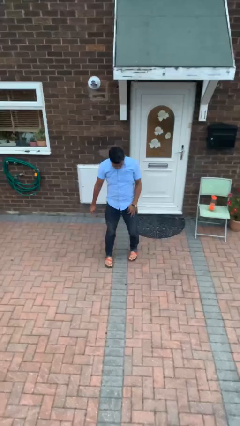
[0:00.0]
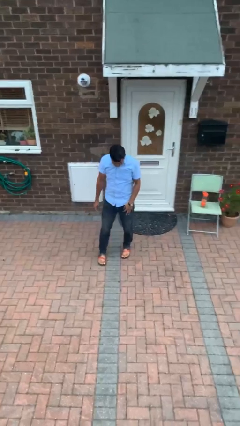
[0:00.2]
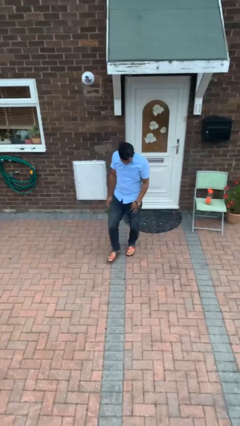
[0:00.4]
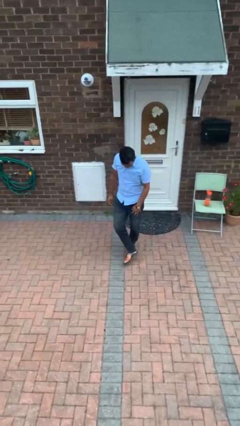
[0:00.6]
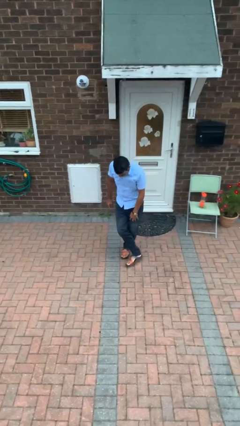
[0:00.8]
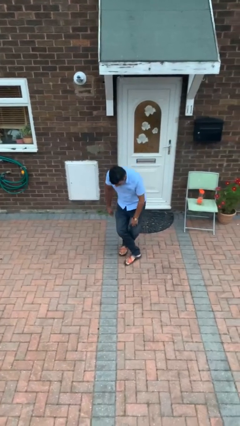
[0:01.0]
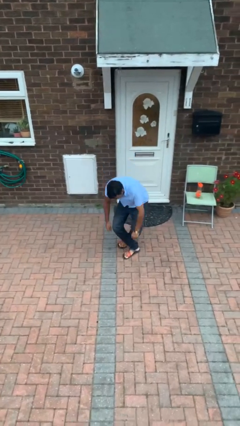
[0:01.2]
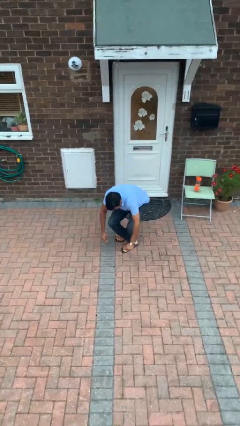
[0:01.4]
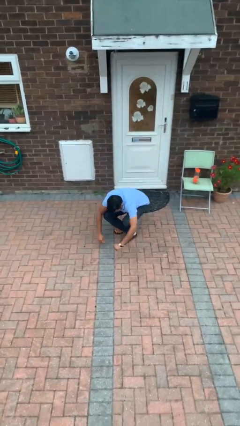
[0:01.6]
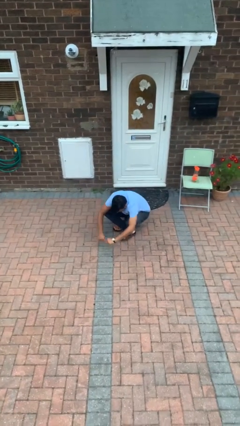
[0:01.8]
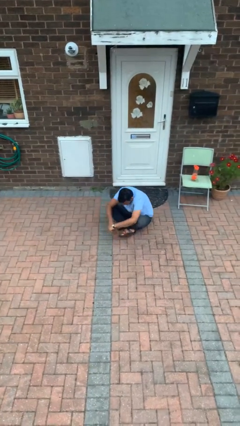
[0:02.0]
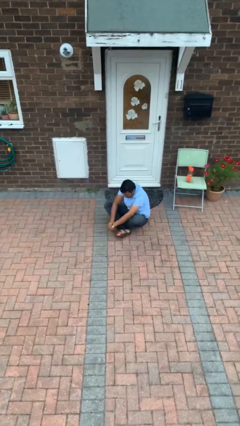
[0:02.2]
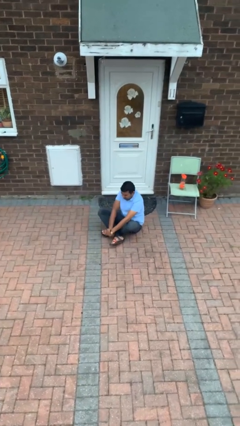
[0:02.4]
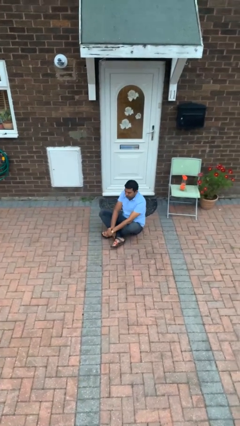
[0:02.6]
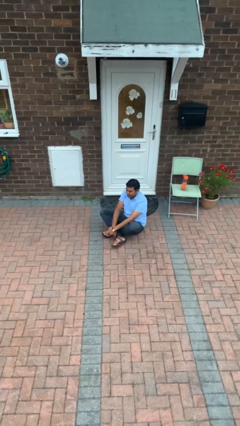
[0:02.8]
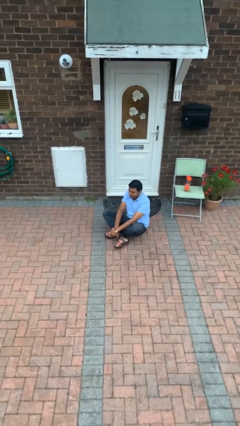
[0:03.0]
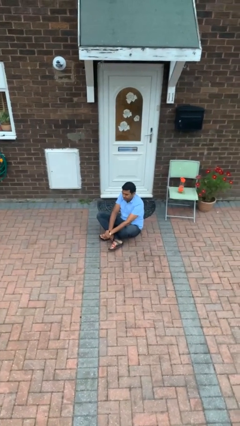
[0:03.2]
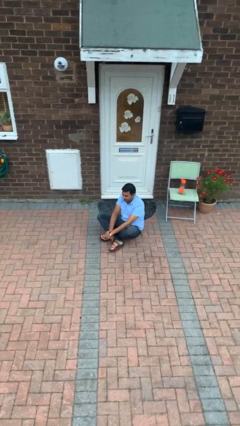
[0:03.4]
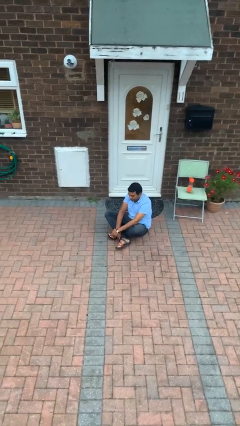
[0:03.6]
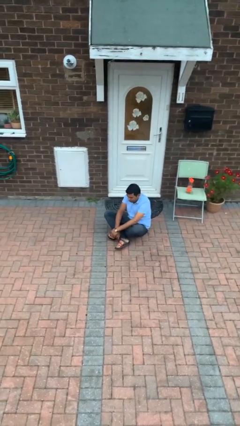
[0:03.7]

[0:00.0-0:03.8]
person sits crisscross

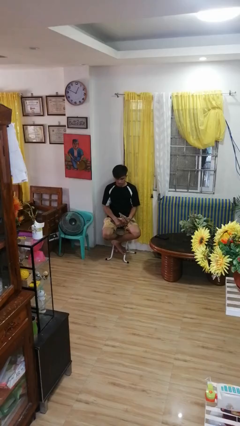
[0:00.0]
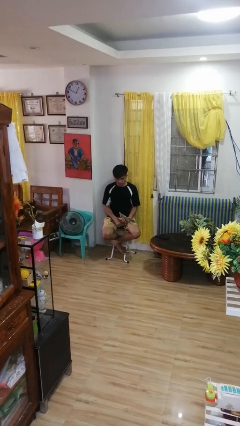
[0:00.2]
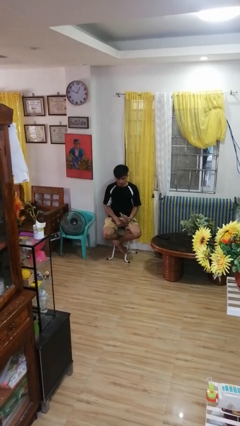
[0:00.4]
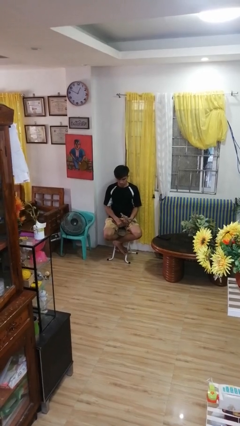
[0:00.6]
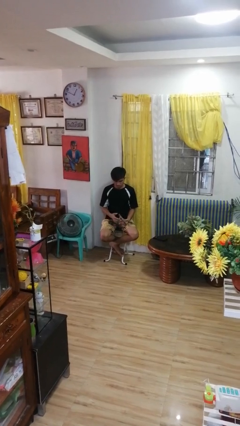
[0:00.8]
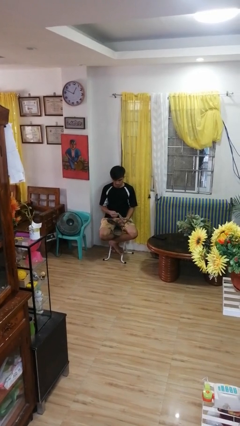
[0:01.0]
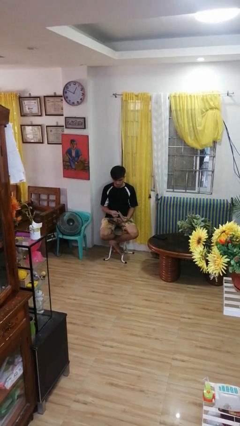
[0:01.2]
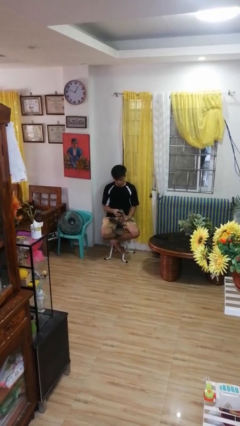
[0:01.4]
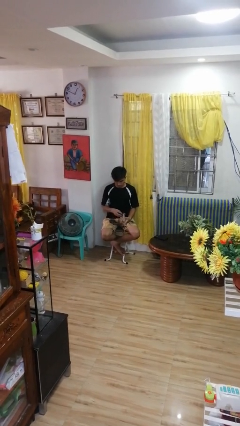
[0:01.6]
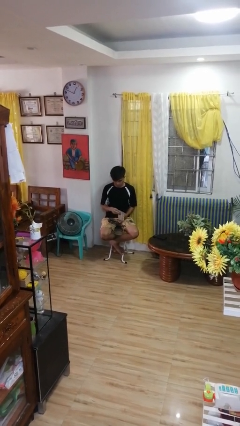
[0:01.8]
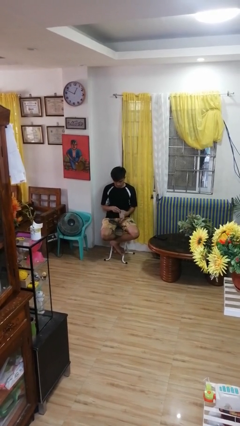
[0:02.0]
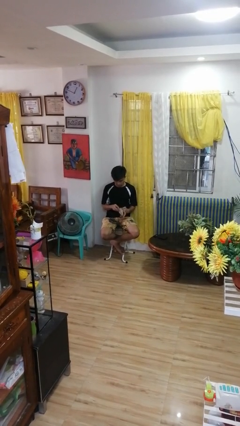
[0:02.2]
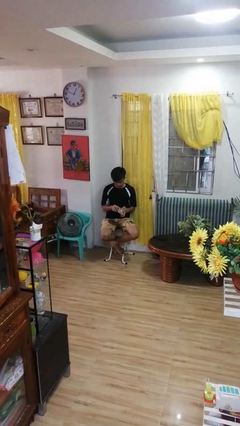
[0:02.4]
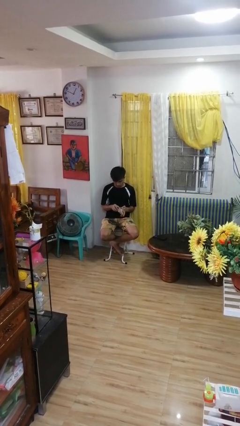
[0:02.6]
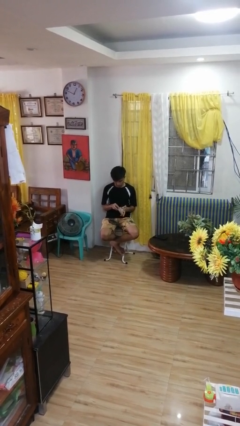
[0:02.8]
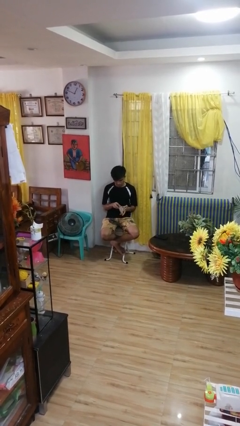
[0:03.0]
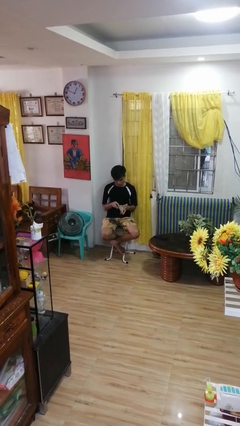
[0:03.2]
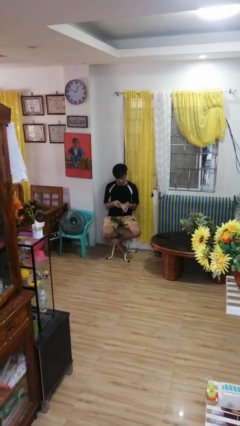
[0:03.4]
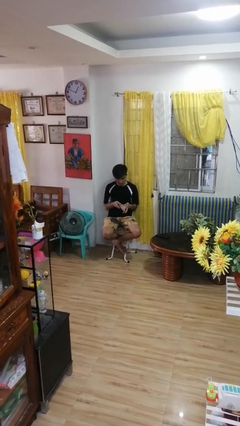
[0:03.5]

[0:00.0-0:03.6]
person searches in purse

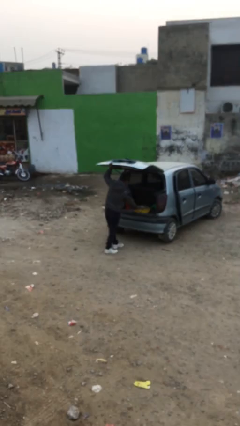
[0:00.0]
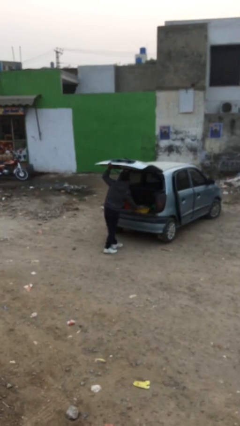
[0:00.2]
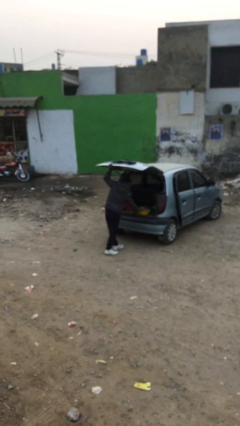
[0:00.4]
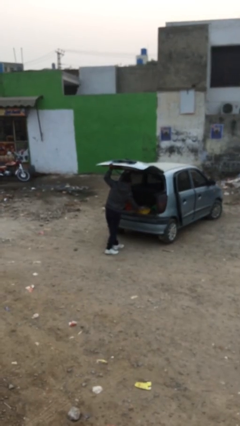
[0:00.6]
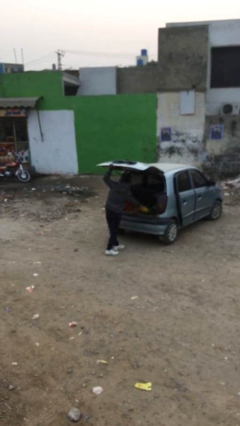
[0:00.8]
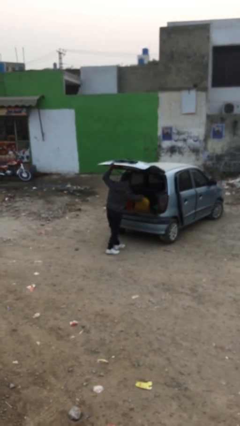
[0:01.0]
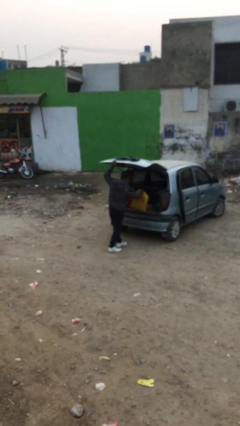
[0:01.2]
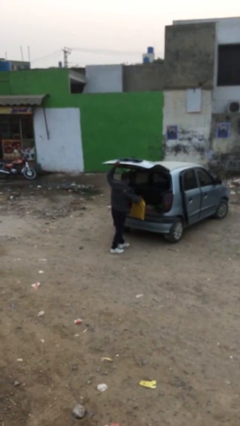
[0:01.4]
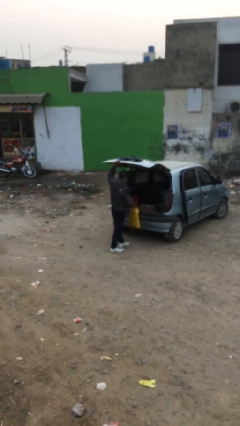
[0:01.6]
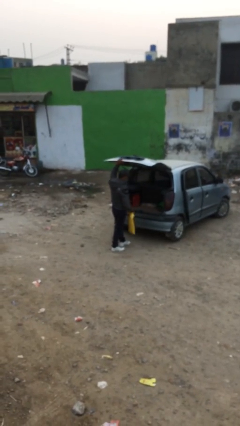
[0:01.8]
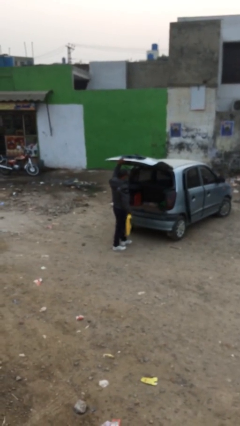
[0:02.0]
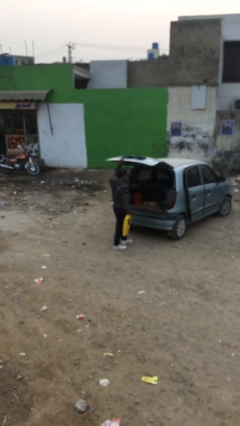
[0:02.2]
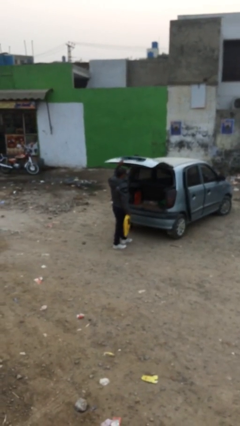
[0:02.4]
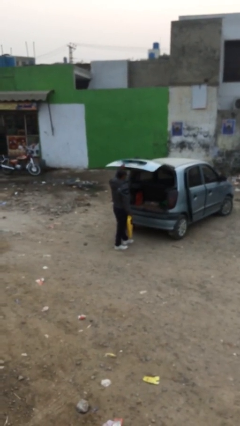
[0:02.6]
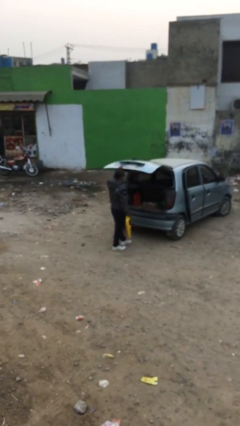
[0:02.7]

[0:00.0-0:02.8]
person unloads car

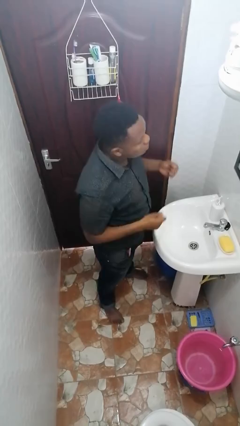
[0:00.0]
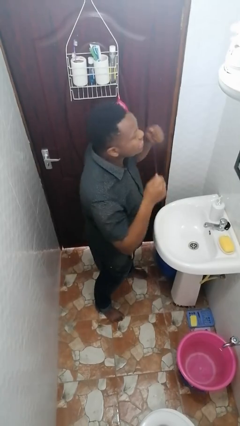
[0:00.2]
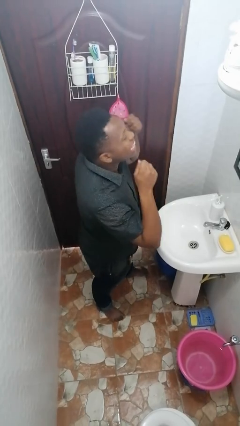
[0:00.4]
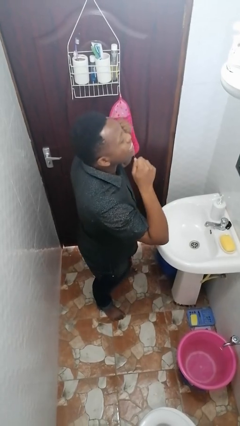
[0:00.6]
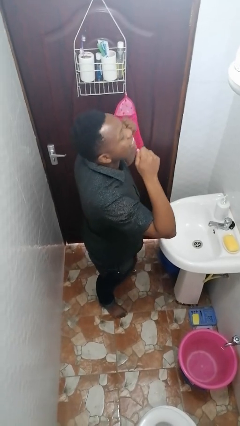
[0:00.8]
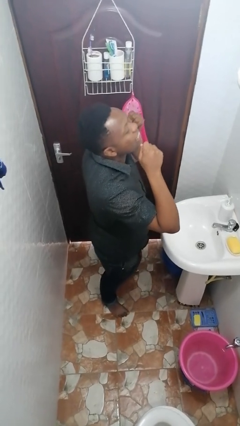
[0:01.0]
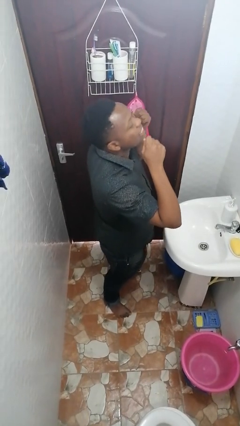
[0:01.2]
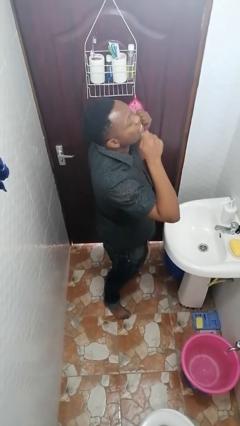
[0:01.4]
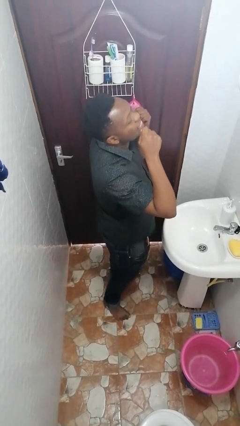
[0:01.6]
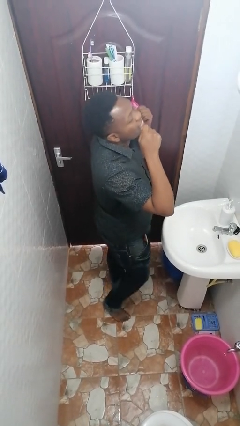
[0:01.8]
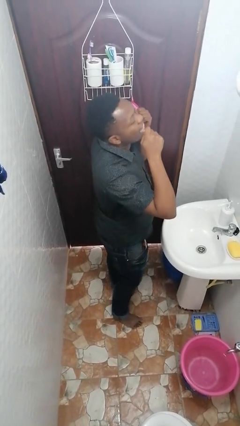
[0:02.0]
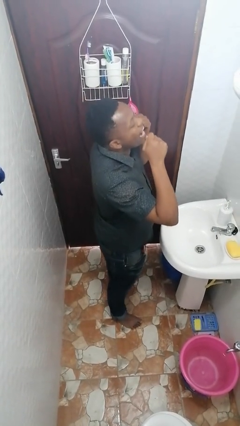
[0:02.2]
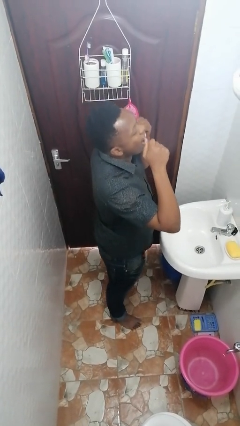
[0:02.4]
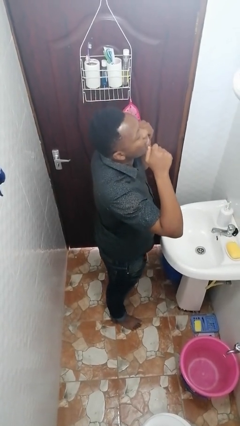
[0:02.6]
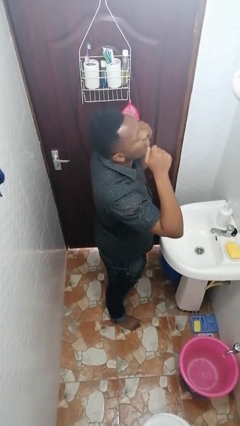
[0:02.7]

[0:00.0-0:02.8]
person flosses

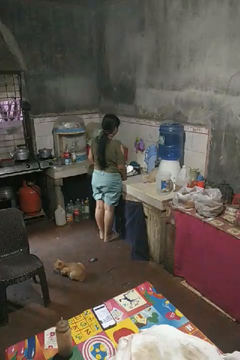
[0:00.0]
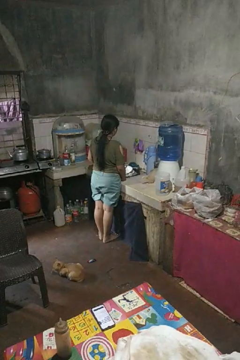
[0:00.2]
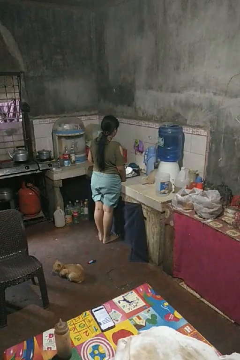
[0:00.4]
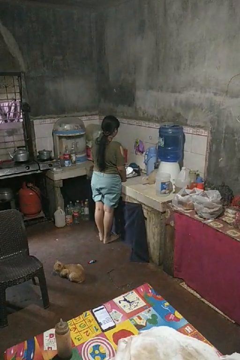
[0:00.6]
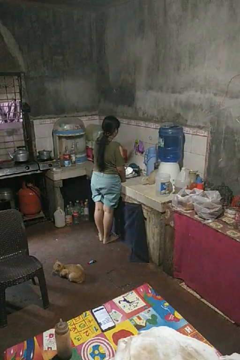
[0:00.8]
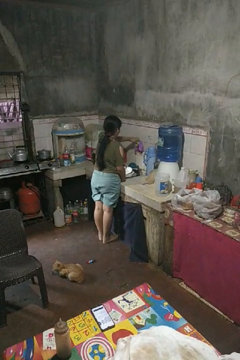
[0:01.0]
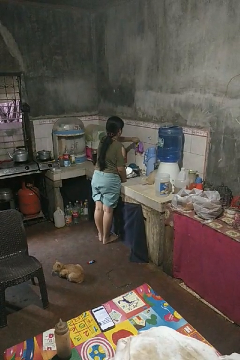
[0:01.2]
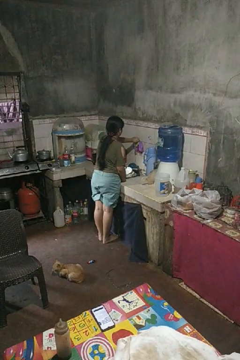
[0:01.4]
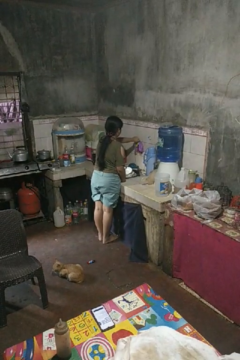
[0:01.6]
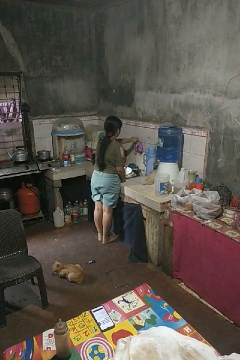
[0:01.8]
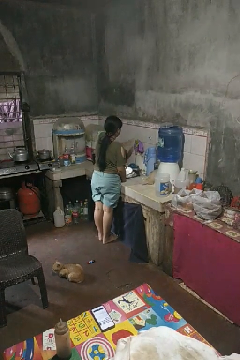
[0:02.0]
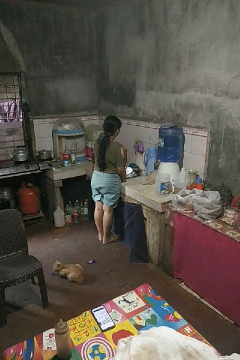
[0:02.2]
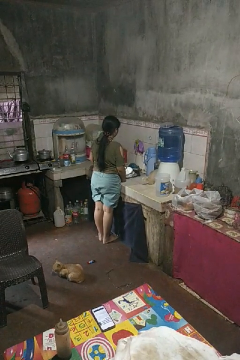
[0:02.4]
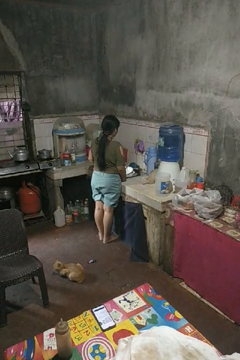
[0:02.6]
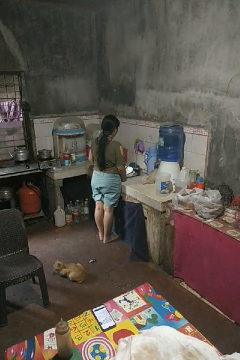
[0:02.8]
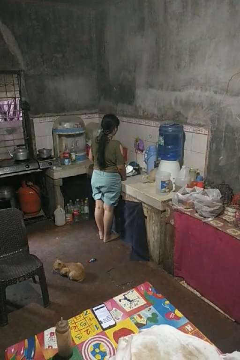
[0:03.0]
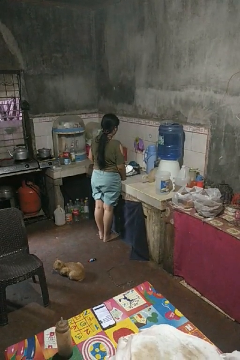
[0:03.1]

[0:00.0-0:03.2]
person turns on faucet

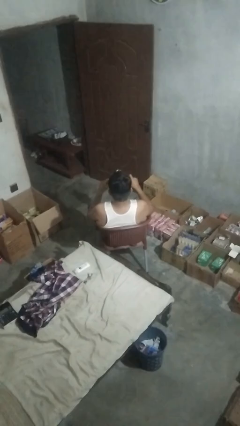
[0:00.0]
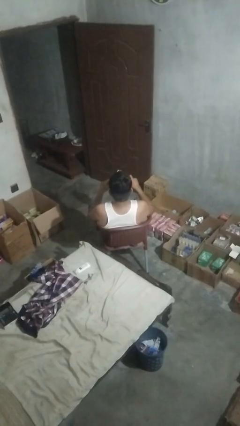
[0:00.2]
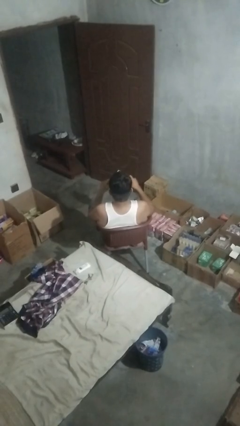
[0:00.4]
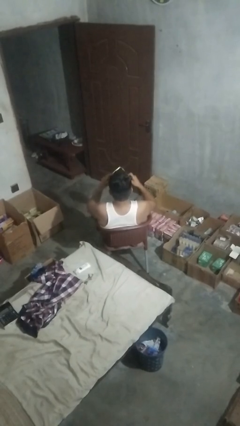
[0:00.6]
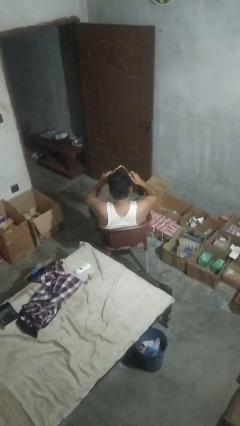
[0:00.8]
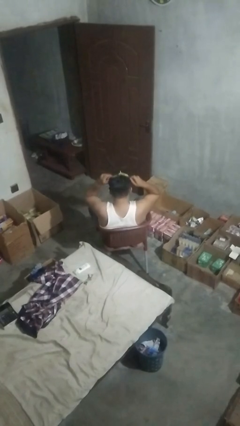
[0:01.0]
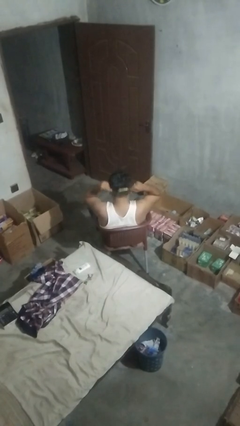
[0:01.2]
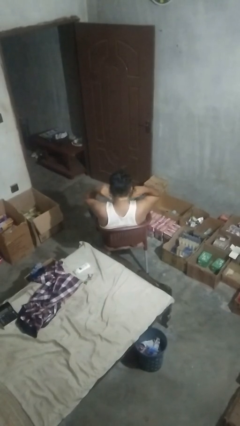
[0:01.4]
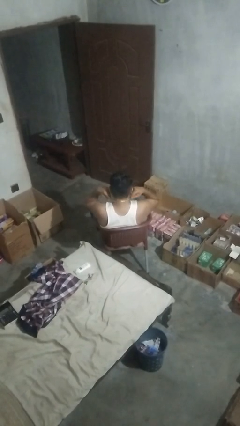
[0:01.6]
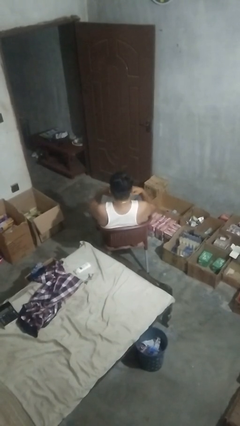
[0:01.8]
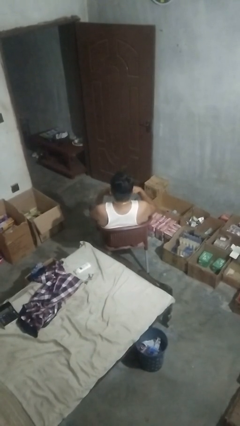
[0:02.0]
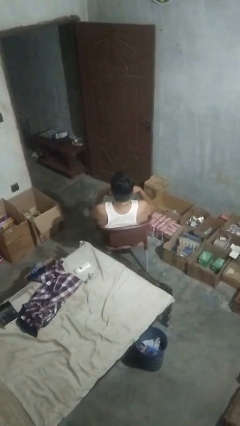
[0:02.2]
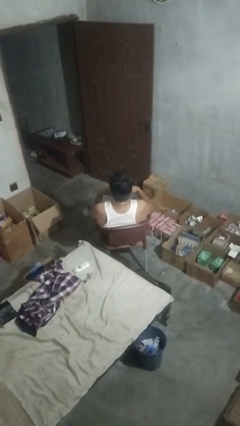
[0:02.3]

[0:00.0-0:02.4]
person puts on necklace
